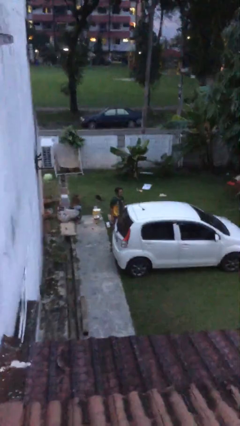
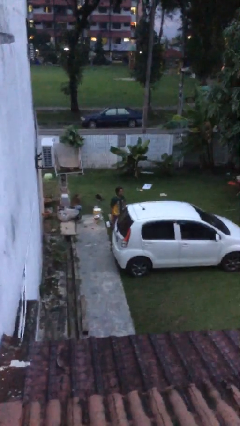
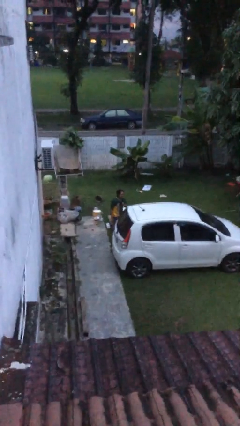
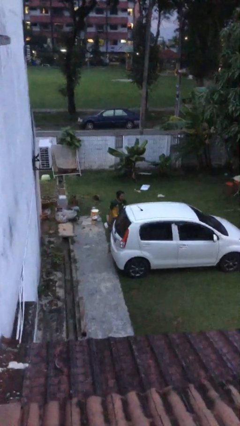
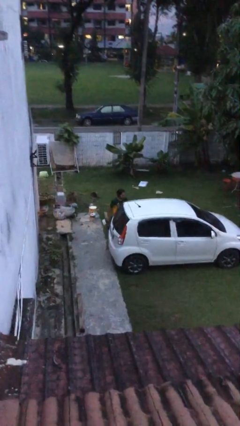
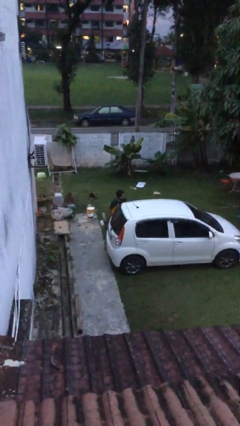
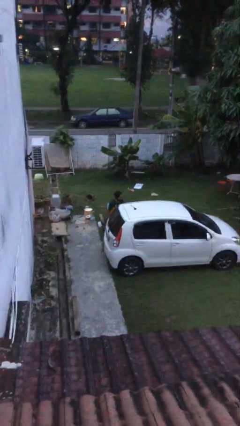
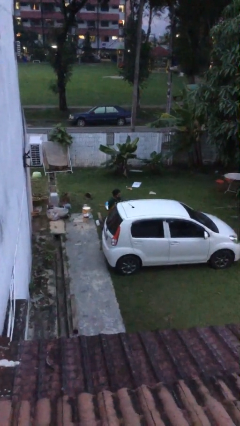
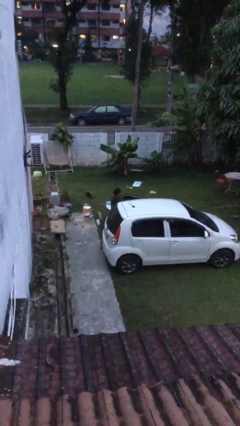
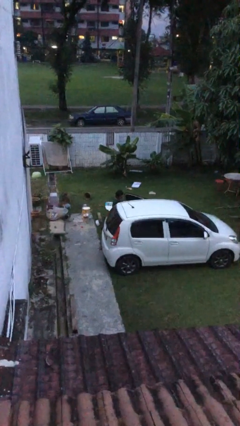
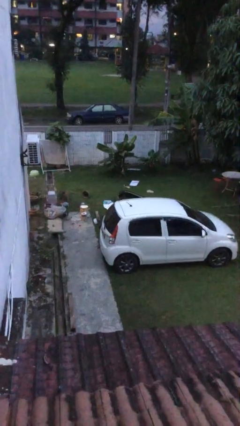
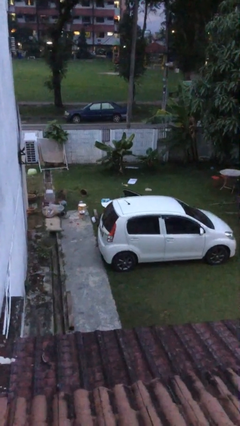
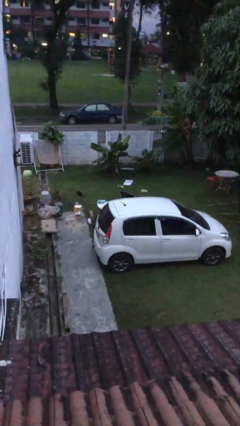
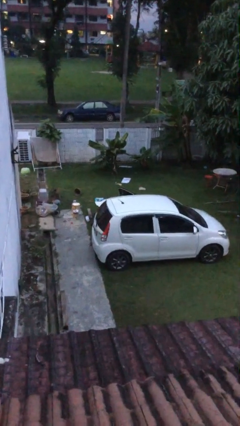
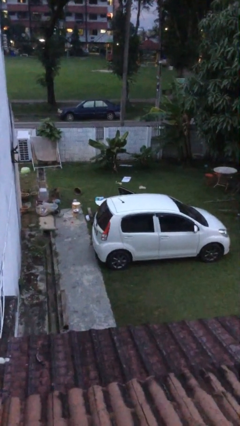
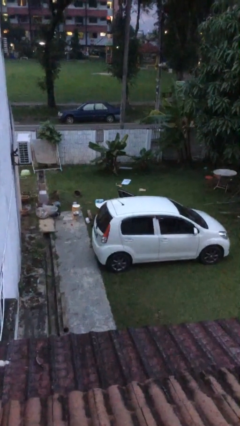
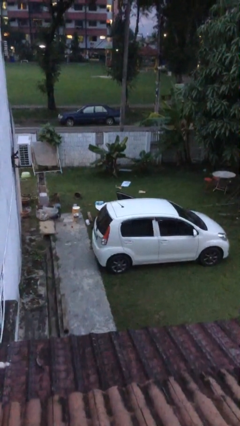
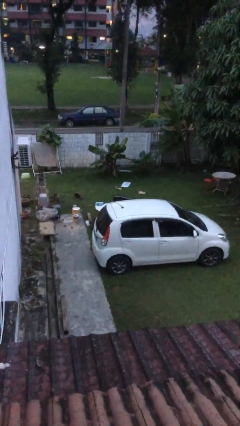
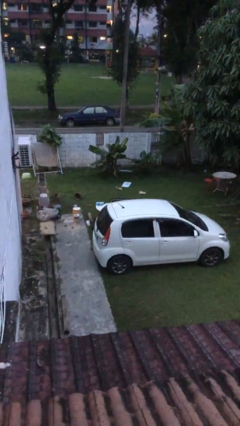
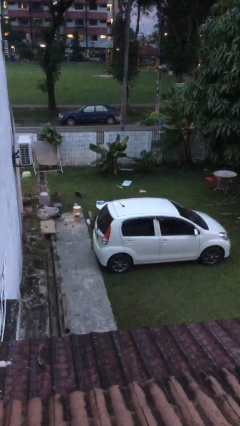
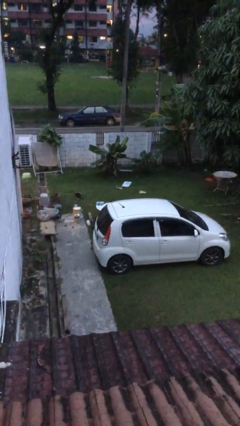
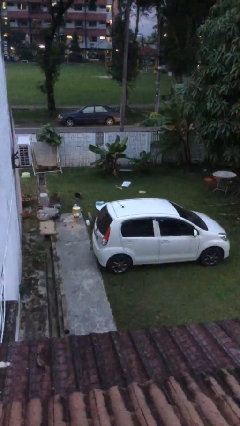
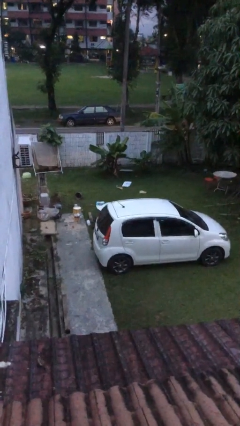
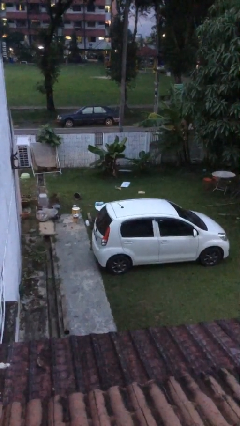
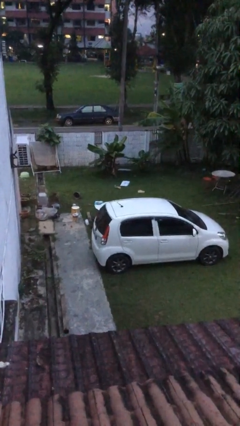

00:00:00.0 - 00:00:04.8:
car picks up person

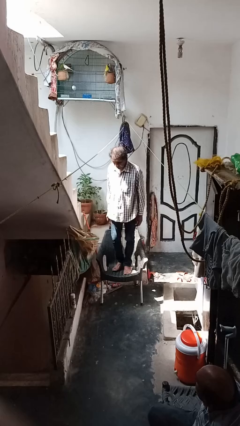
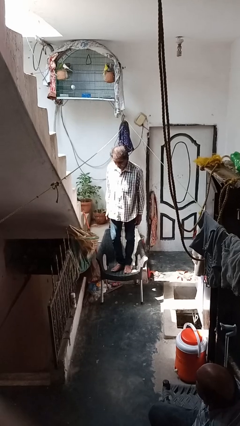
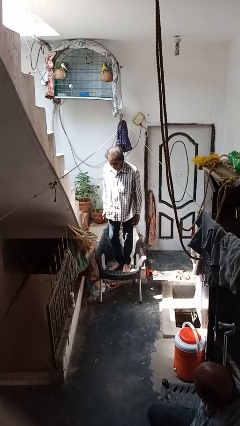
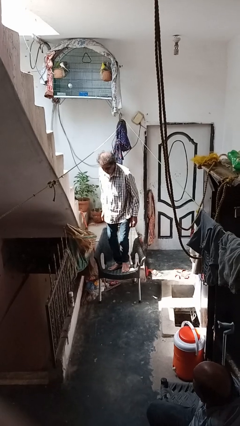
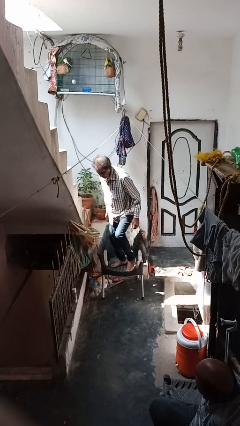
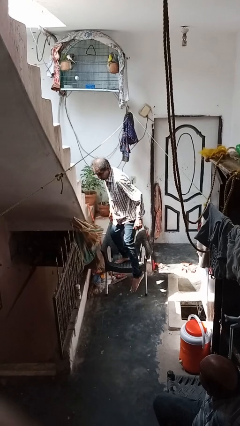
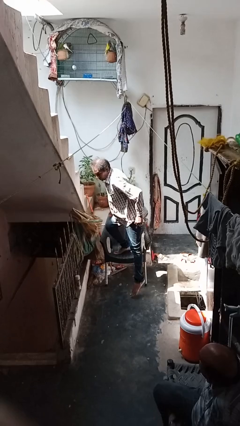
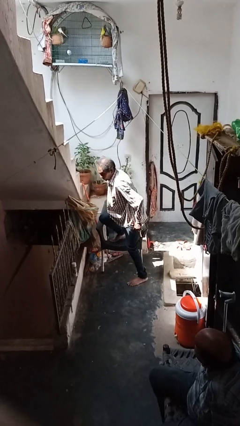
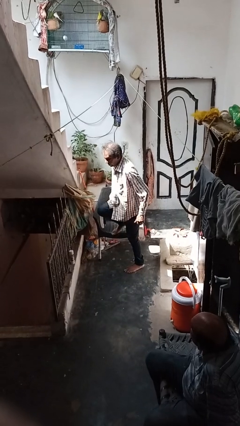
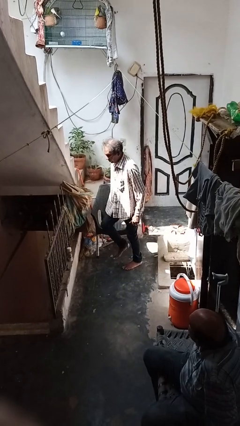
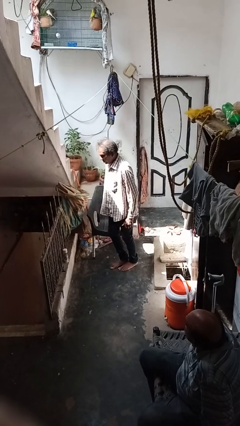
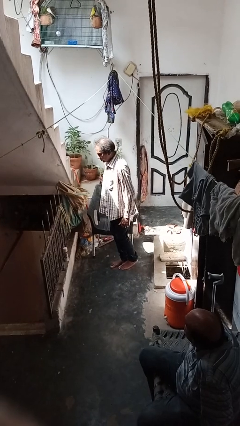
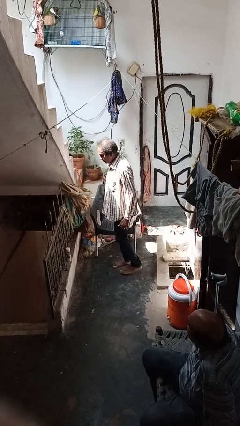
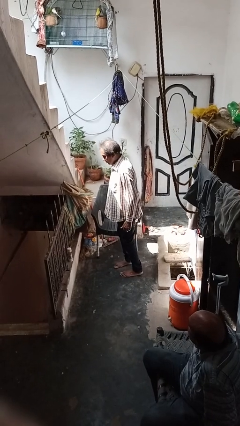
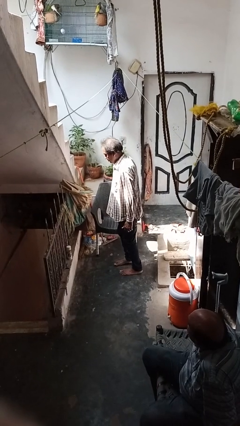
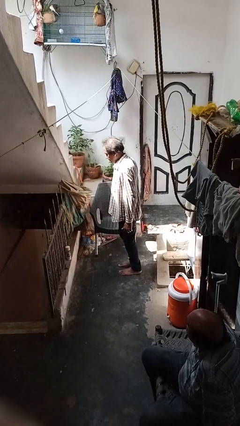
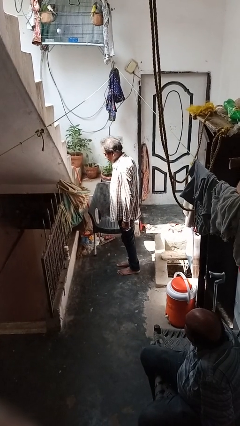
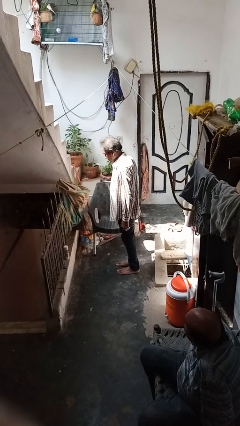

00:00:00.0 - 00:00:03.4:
person climbs off chair

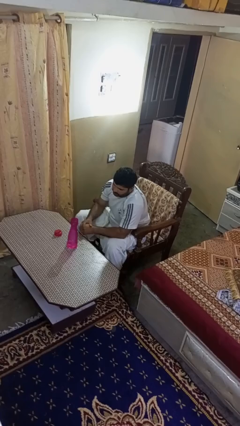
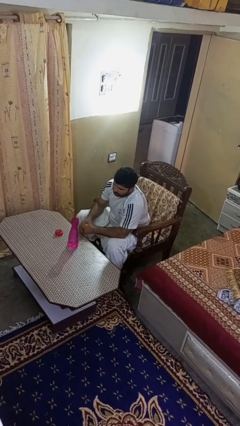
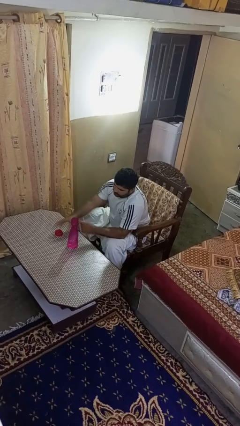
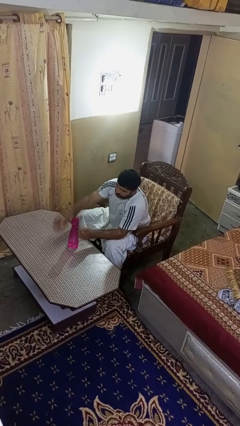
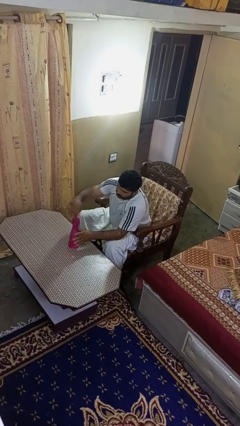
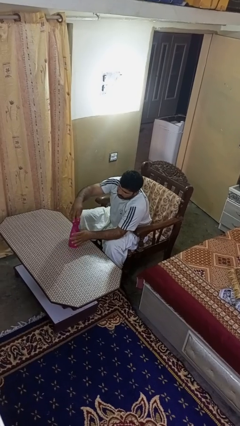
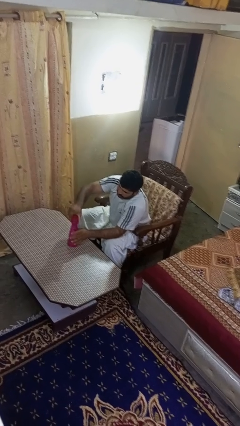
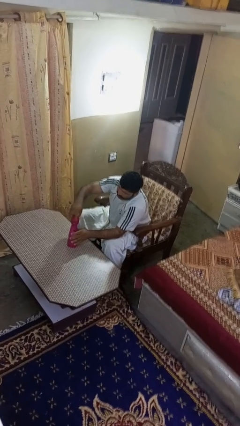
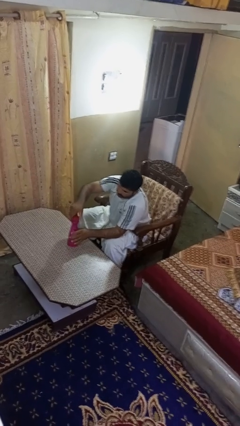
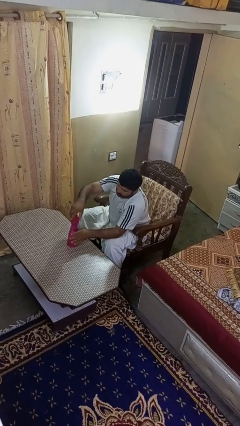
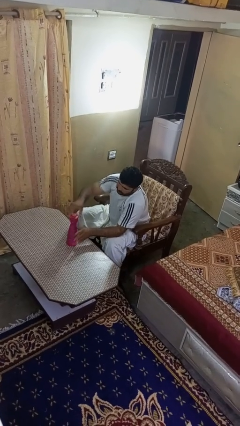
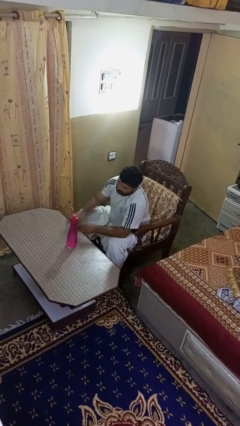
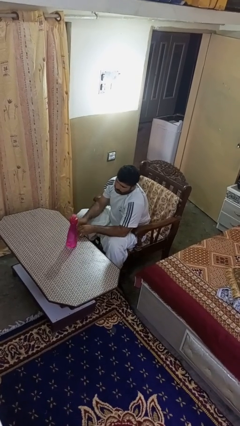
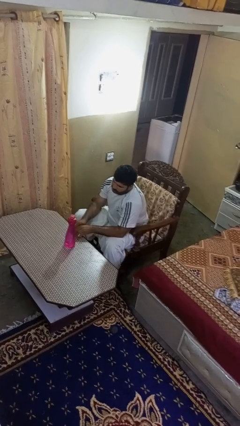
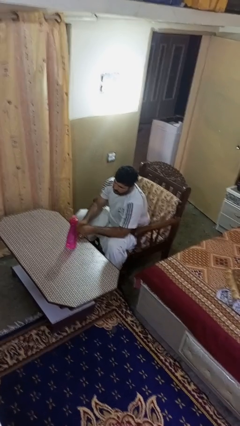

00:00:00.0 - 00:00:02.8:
person screws lid to bottle

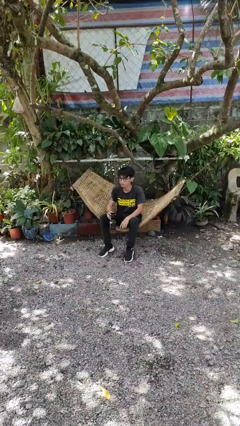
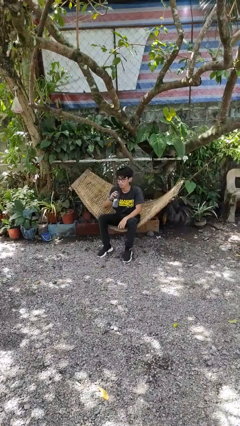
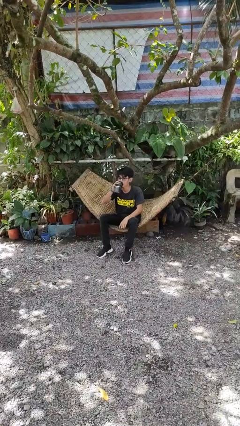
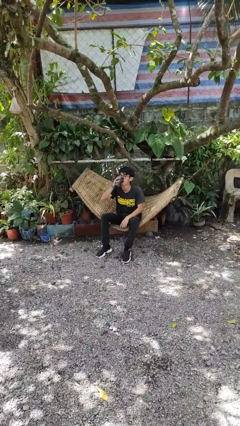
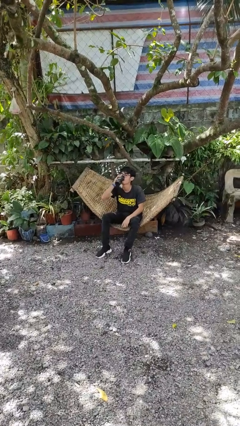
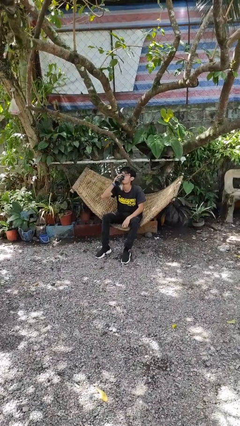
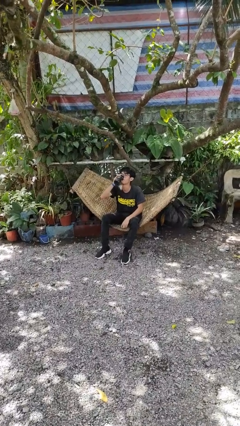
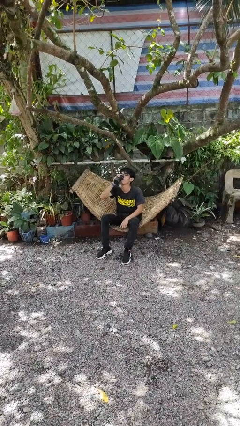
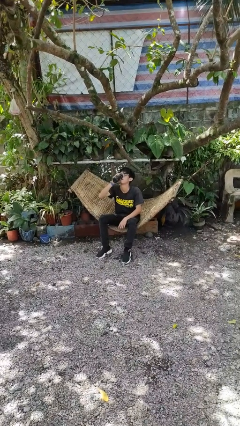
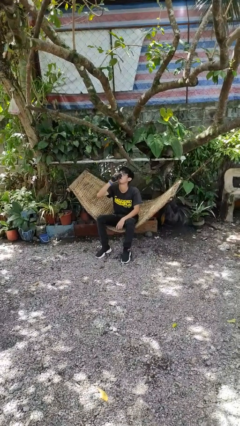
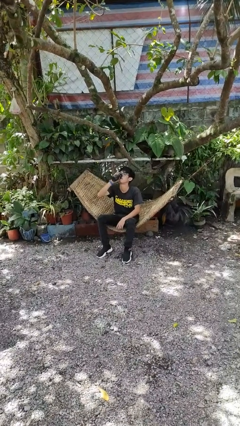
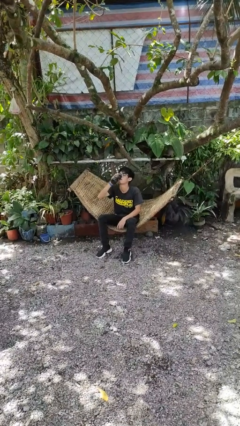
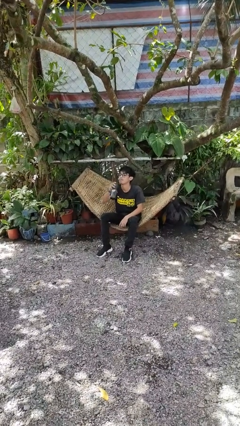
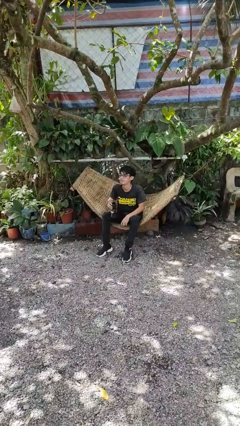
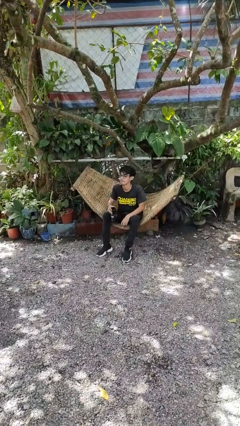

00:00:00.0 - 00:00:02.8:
person drinks from bottle

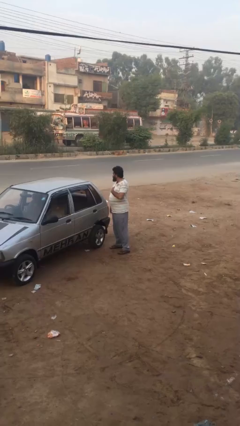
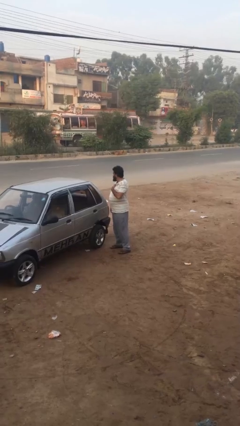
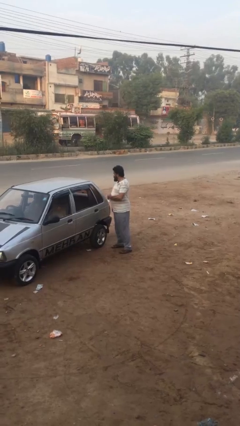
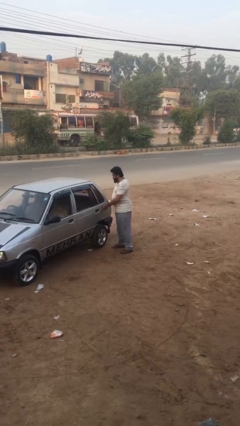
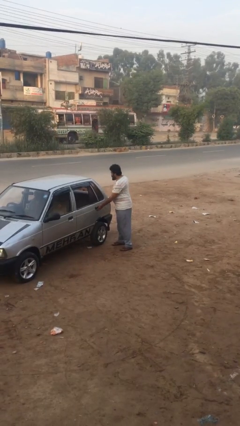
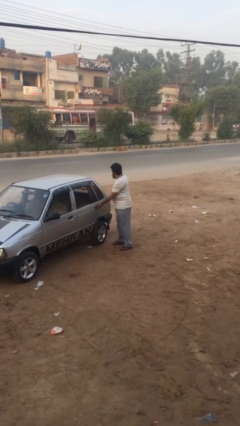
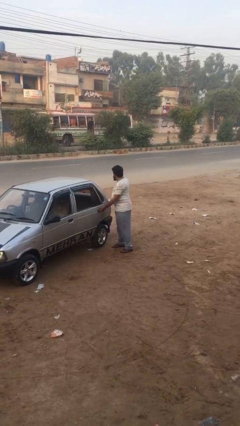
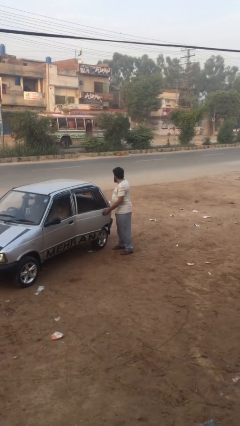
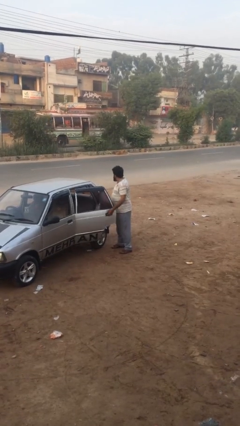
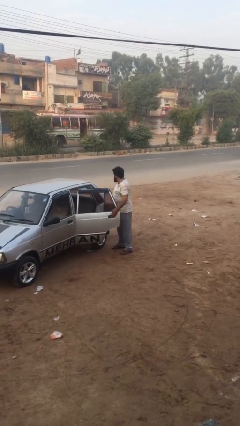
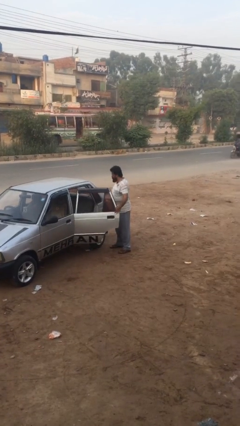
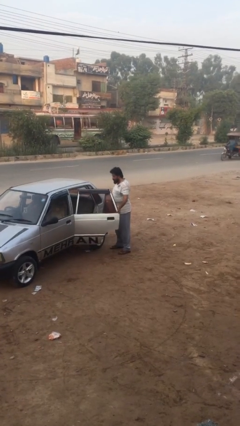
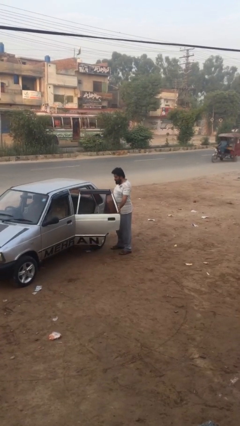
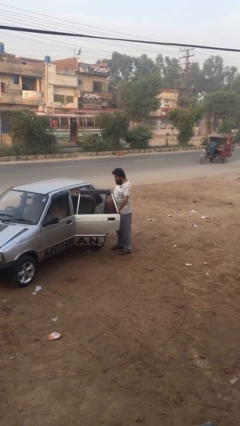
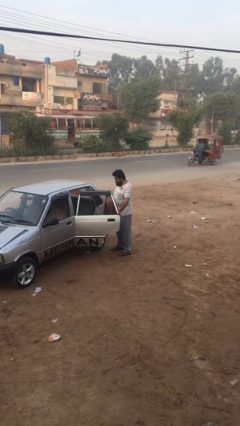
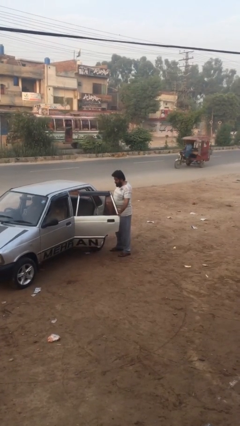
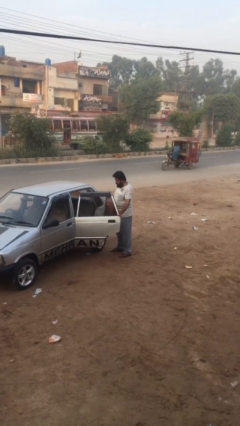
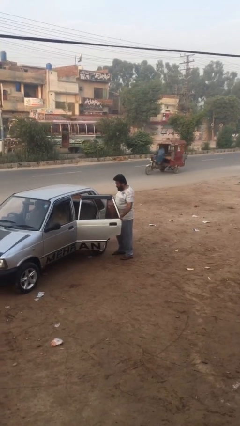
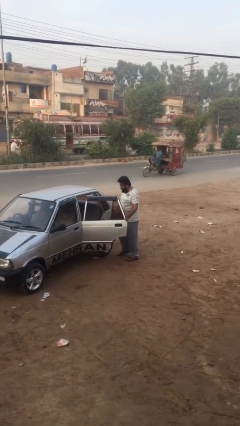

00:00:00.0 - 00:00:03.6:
person opens car door
